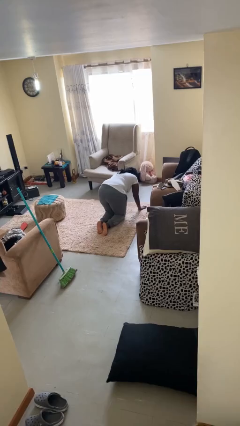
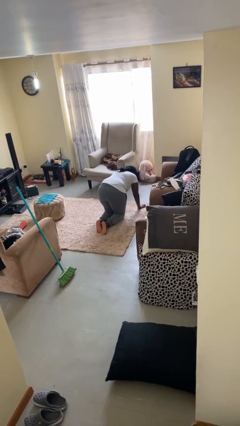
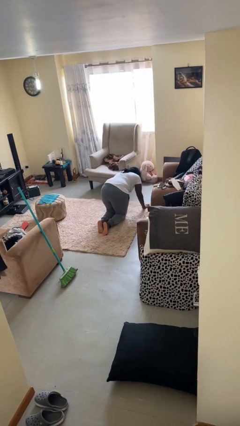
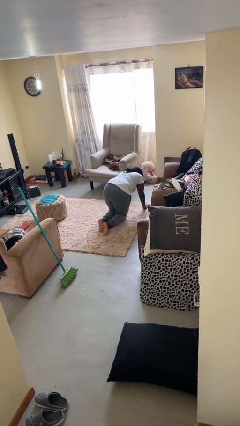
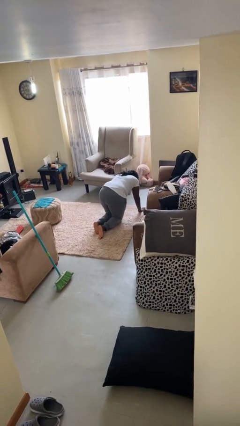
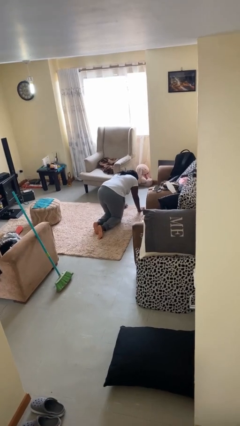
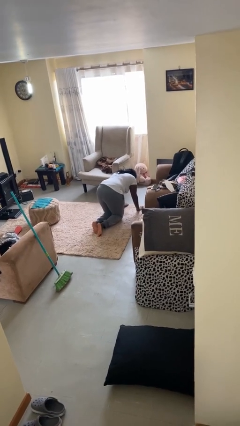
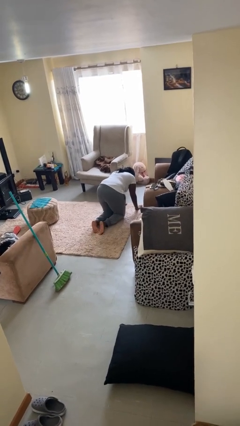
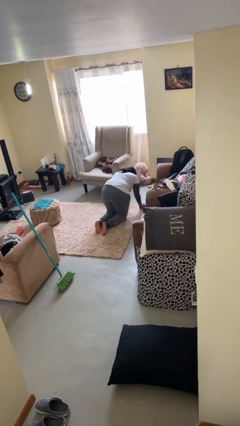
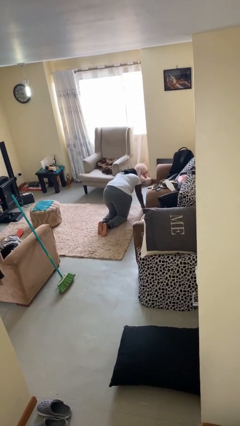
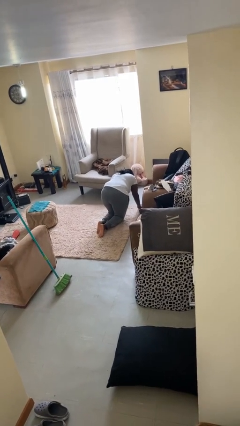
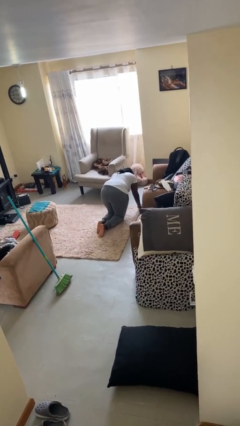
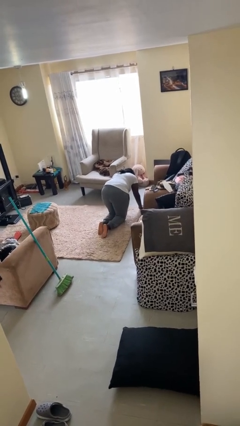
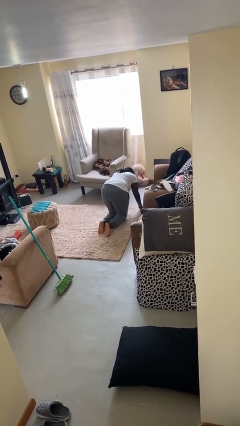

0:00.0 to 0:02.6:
person crawls

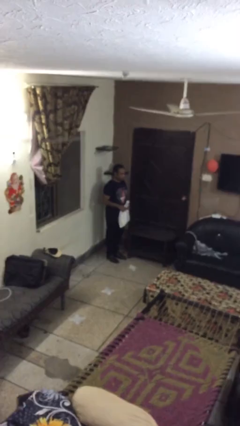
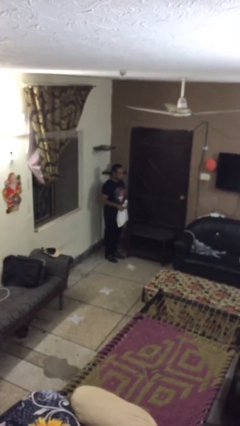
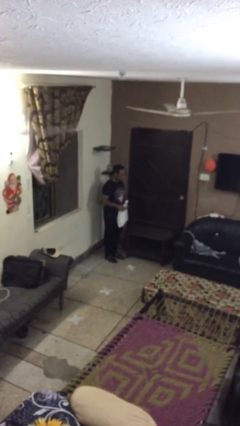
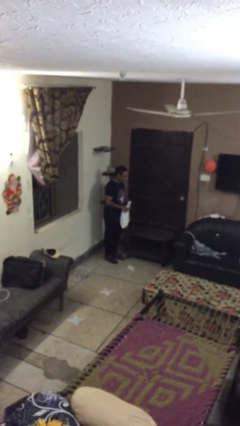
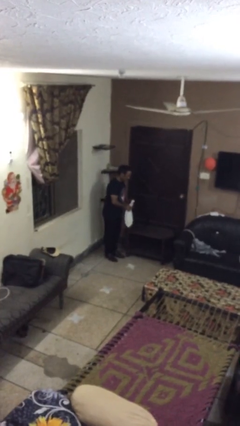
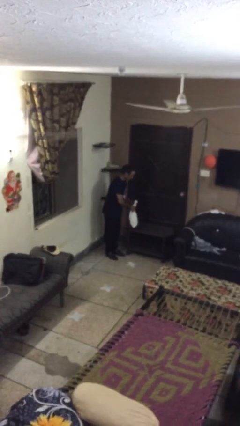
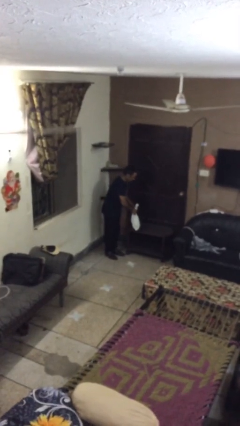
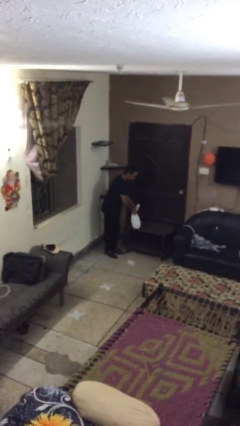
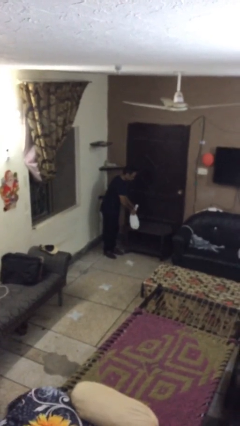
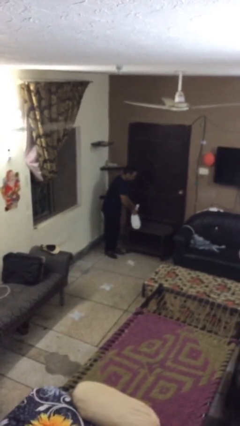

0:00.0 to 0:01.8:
person puts down object on table

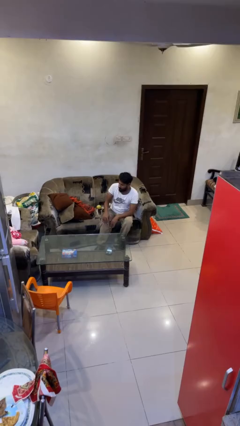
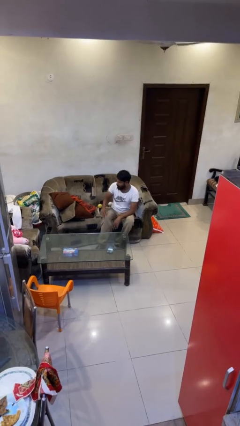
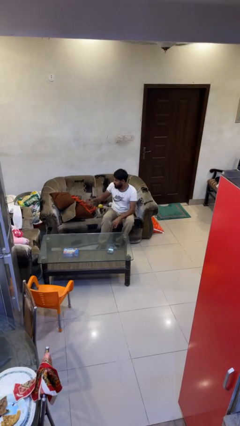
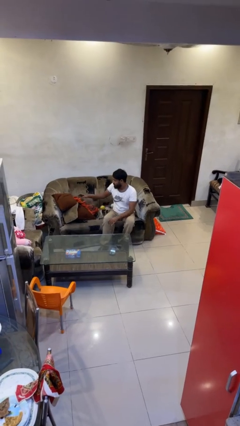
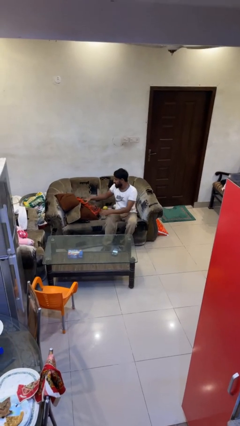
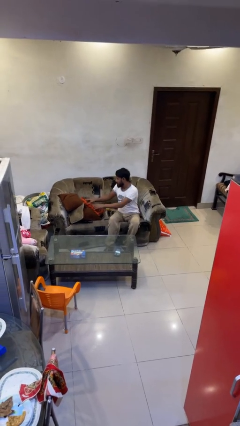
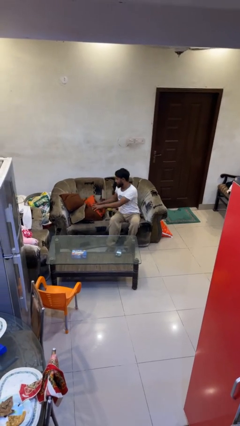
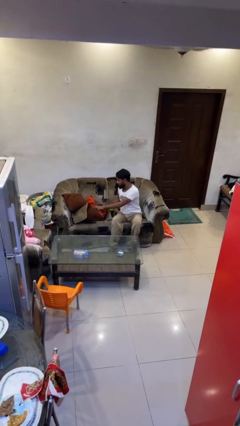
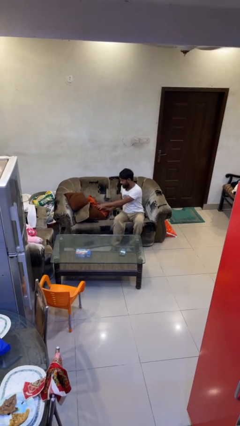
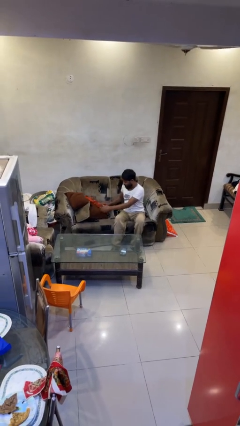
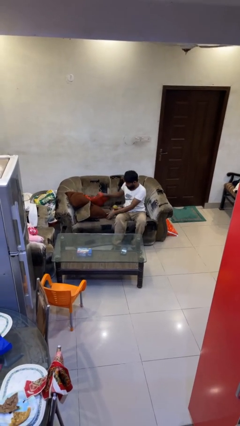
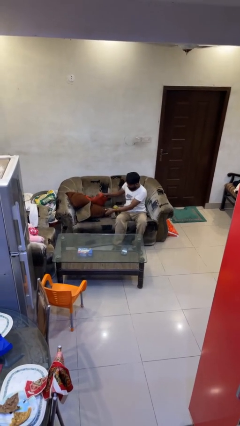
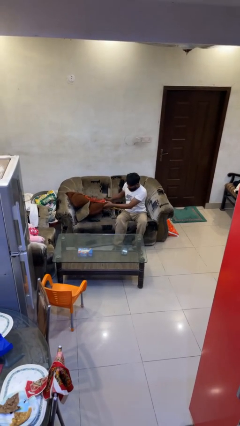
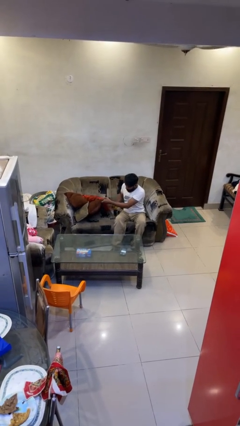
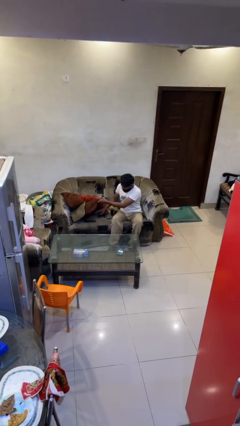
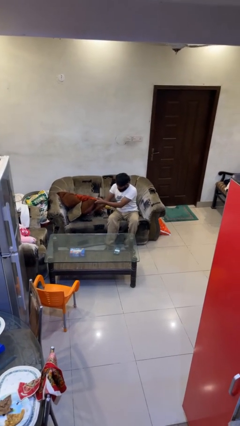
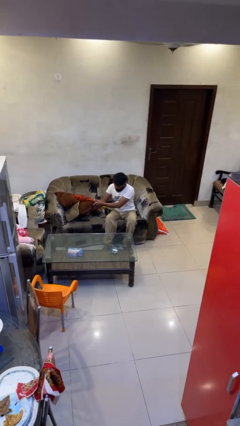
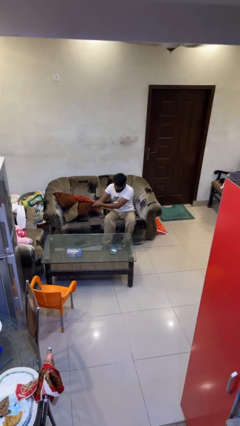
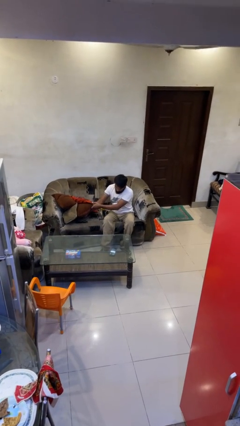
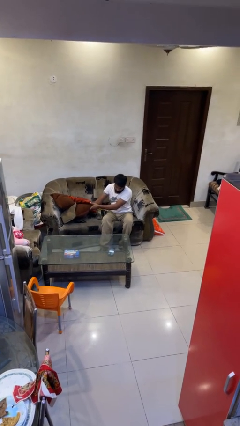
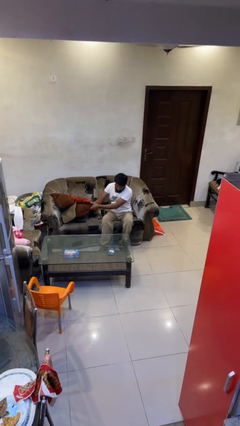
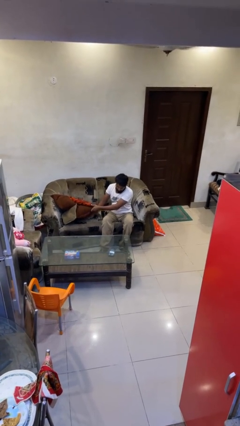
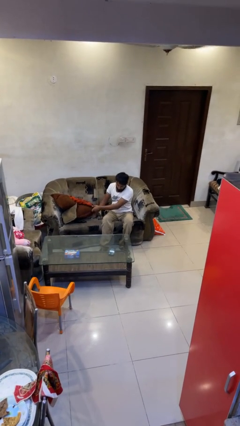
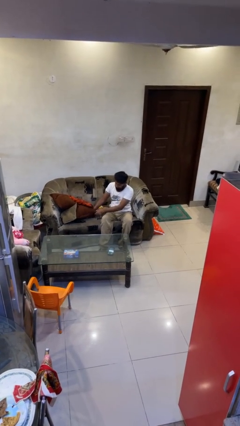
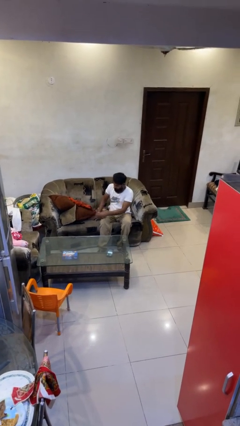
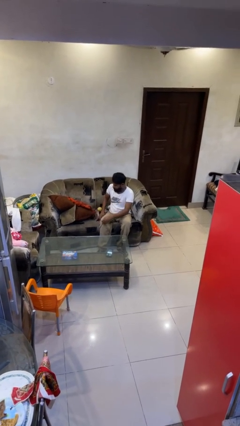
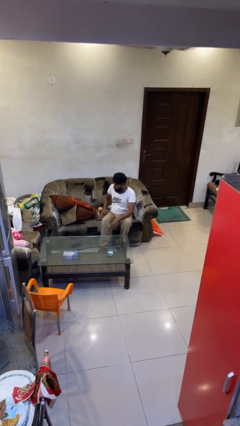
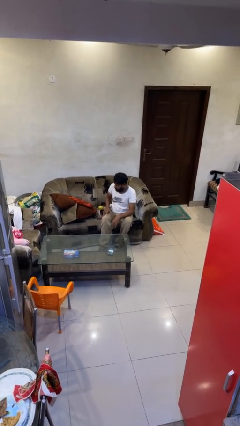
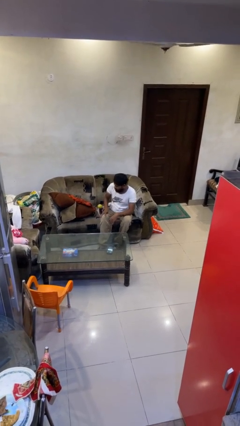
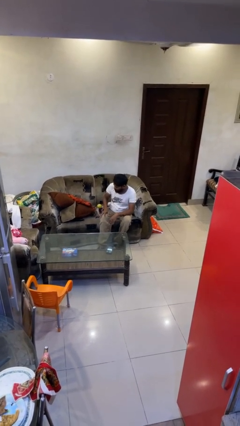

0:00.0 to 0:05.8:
person searches in couch

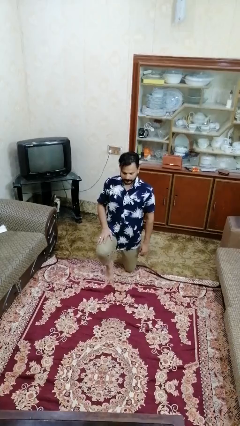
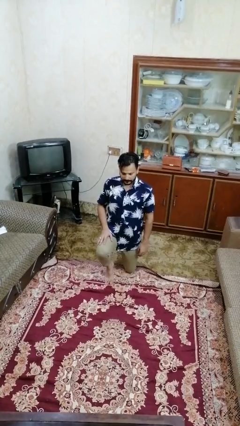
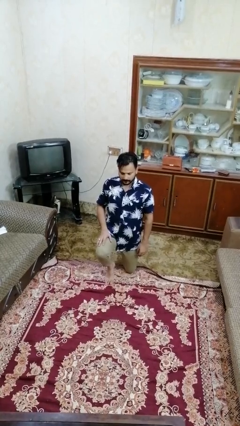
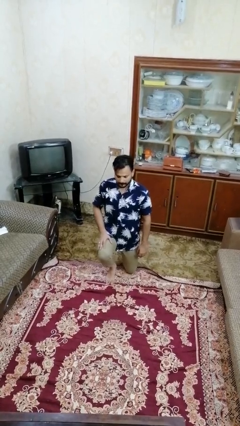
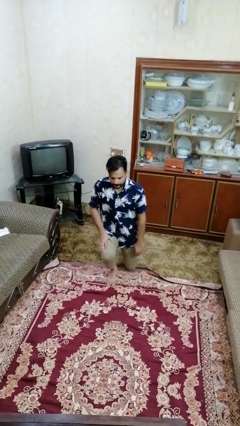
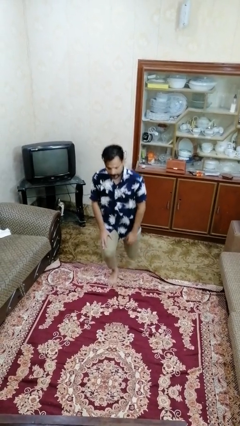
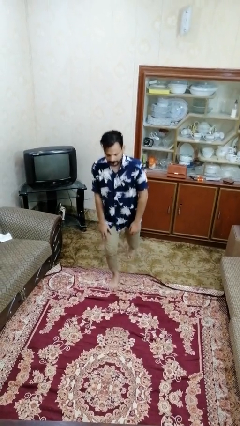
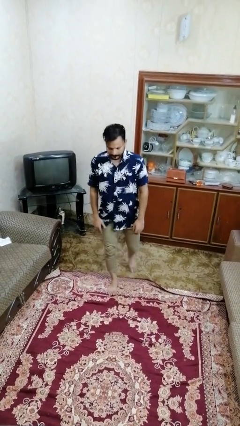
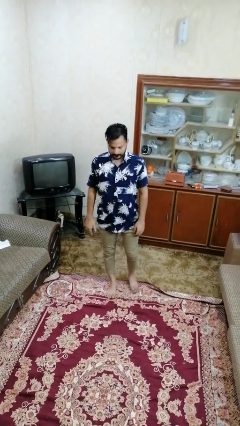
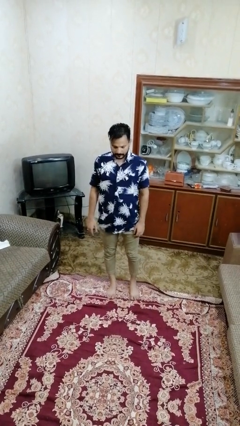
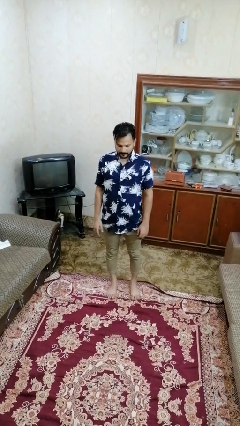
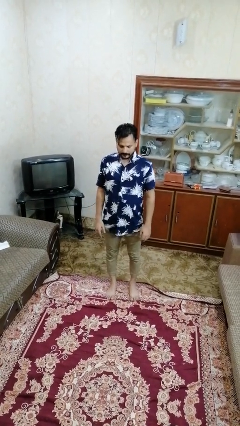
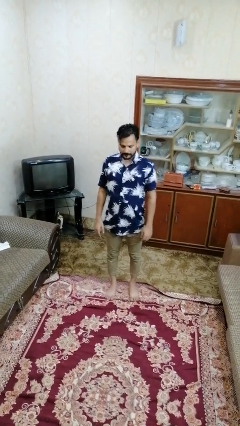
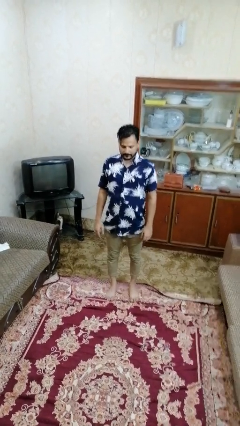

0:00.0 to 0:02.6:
person stands up from floor

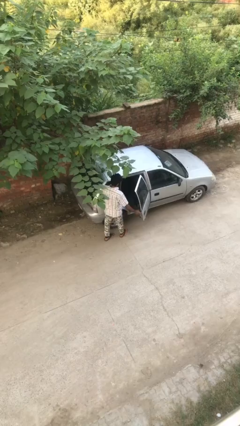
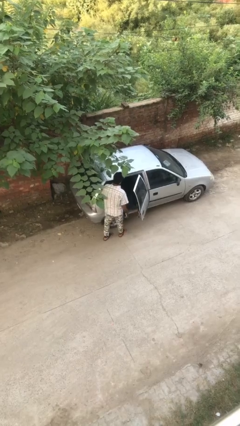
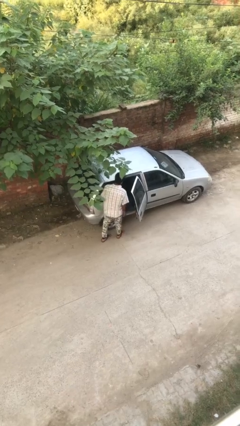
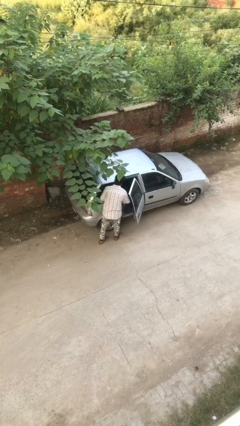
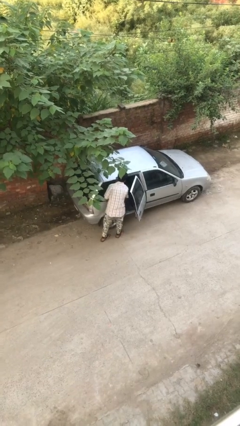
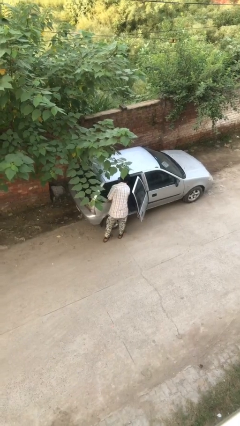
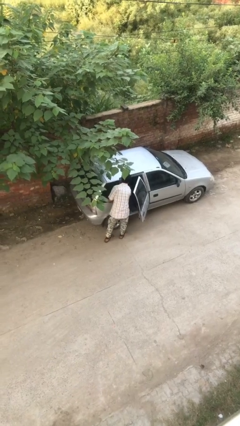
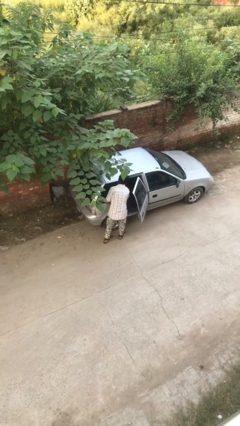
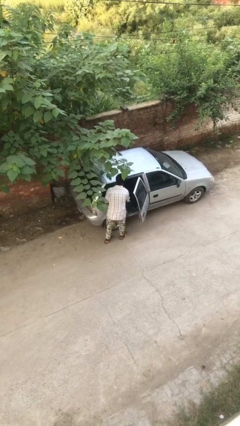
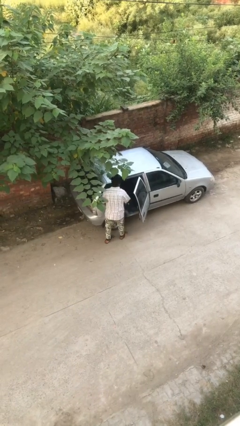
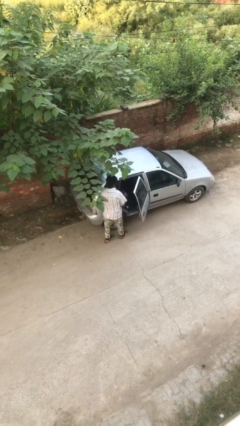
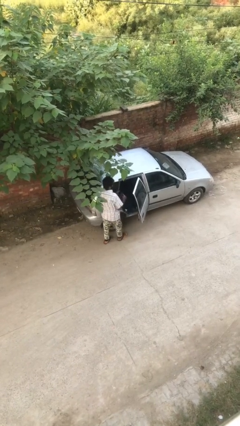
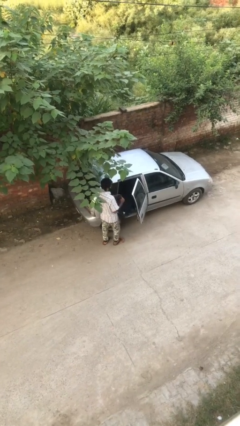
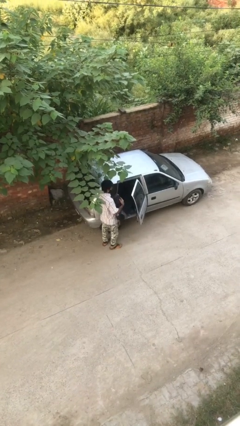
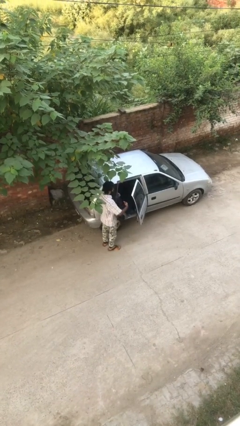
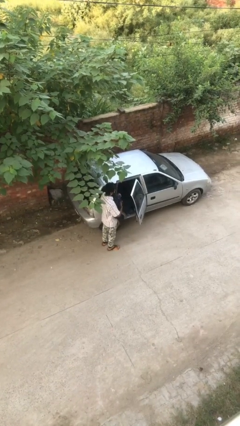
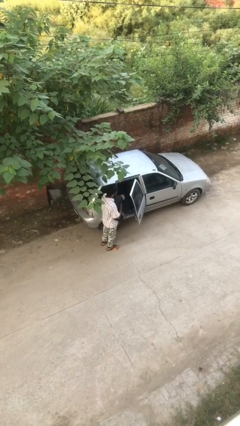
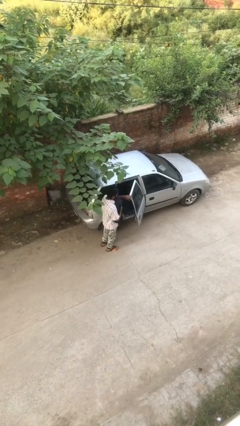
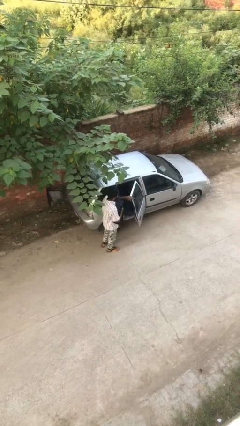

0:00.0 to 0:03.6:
person unloads car

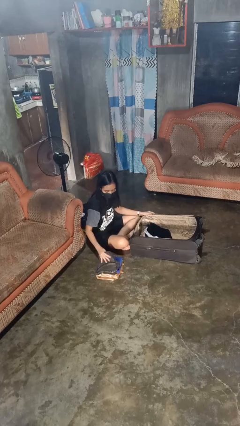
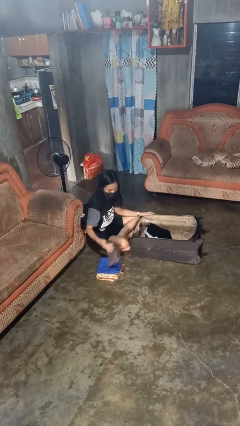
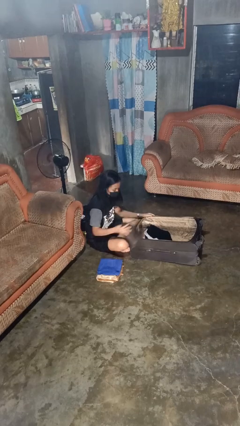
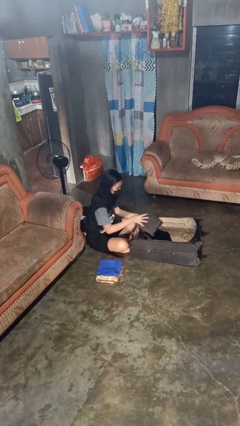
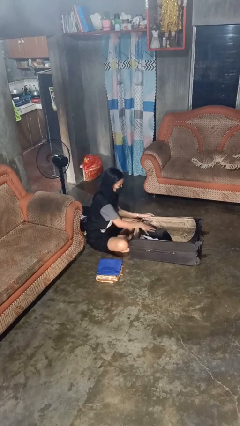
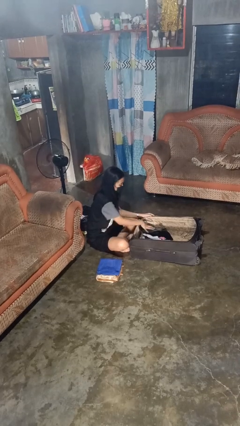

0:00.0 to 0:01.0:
person loads clothes into suitcase
